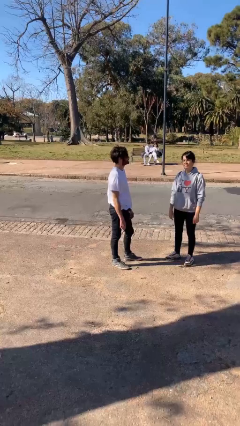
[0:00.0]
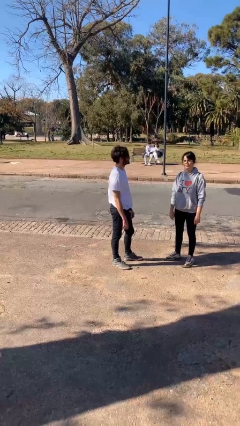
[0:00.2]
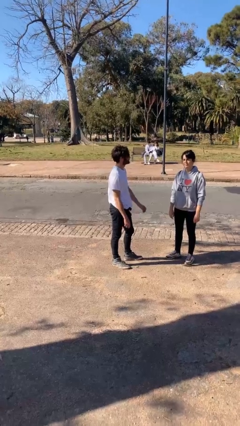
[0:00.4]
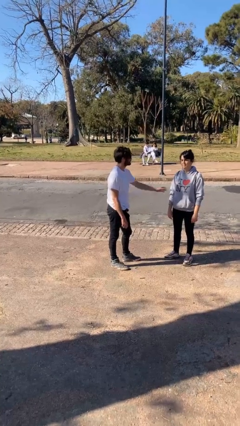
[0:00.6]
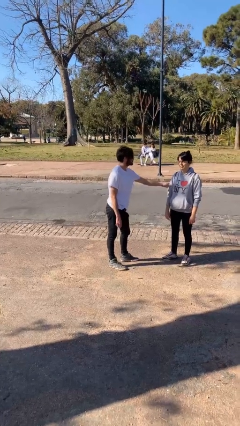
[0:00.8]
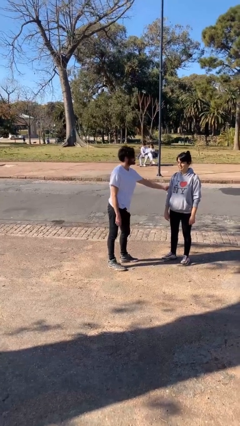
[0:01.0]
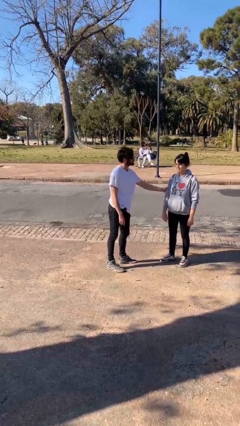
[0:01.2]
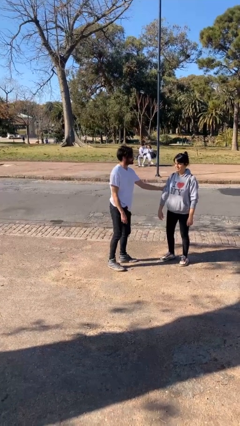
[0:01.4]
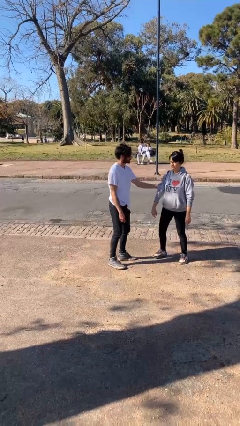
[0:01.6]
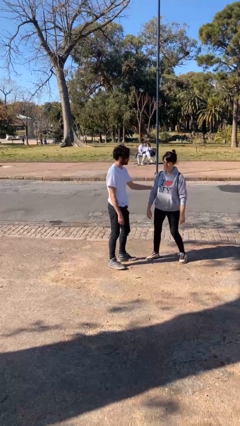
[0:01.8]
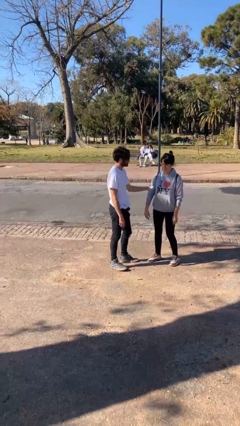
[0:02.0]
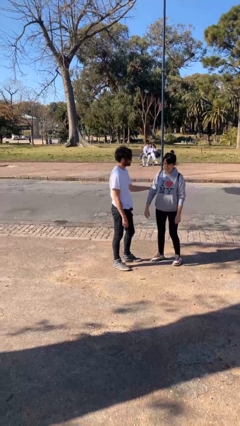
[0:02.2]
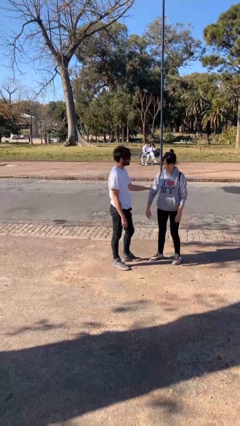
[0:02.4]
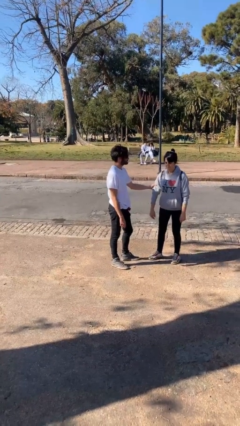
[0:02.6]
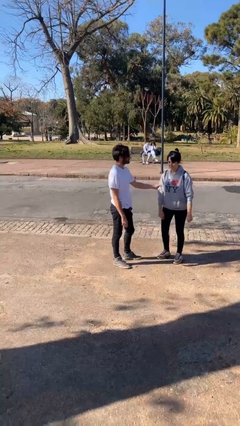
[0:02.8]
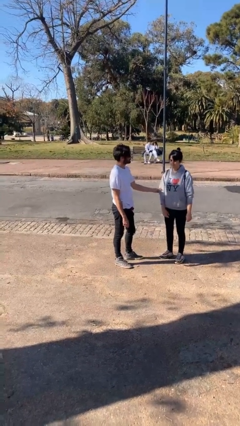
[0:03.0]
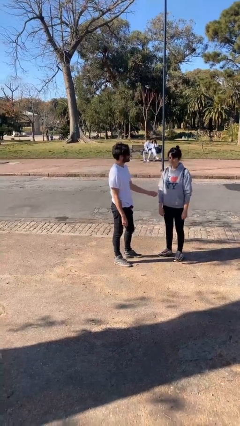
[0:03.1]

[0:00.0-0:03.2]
person grabs person by bicep

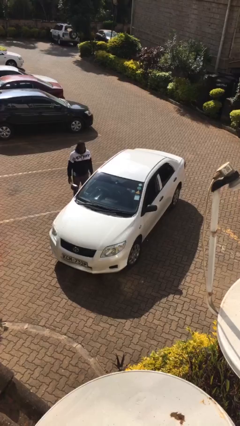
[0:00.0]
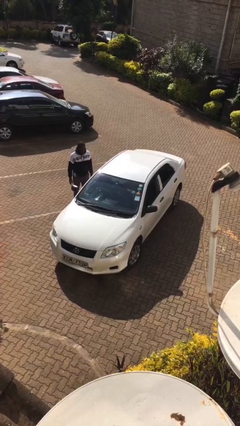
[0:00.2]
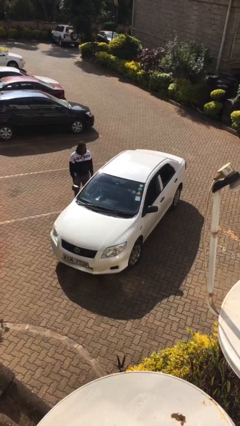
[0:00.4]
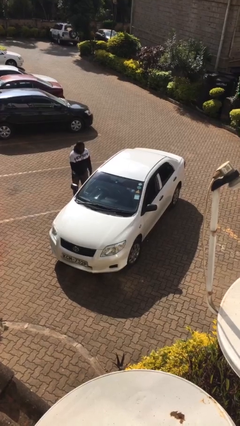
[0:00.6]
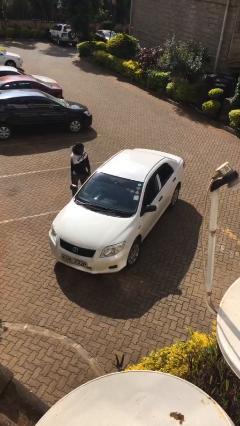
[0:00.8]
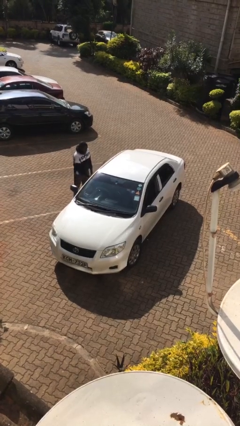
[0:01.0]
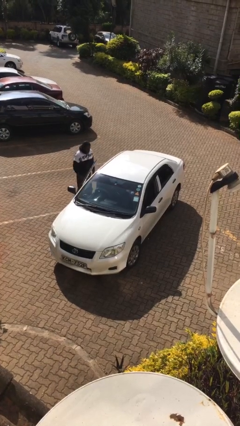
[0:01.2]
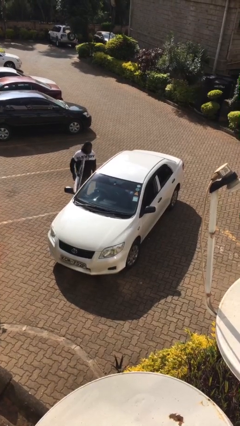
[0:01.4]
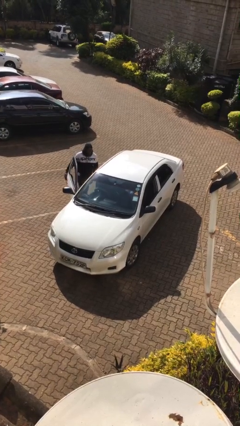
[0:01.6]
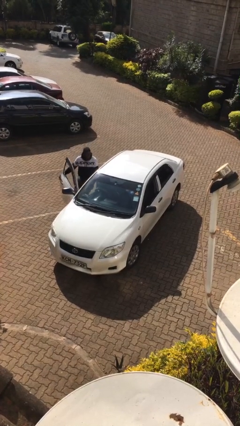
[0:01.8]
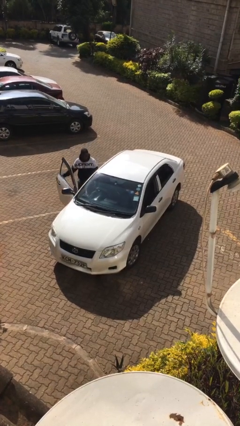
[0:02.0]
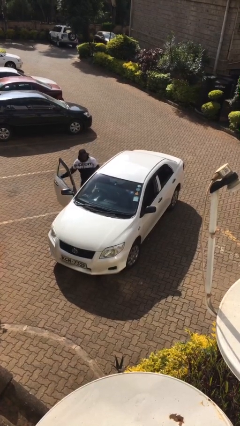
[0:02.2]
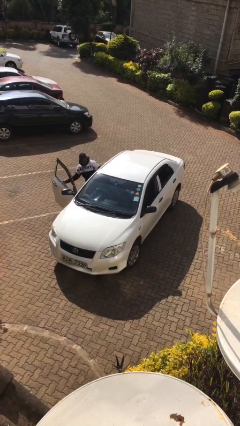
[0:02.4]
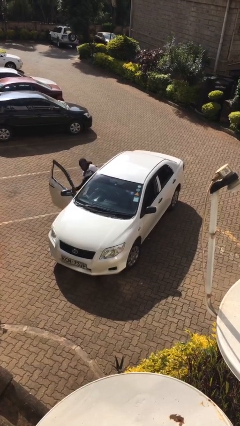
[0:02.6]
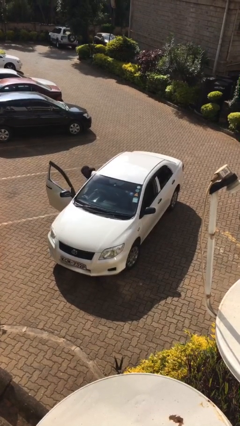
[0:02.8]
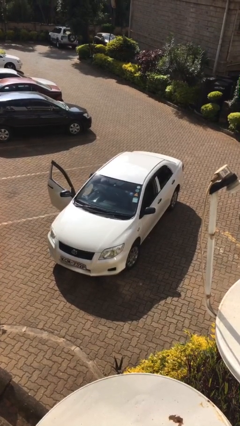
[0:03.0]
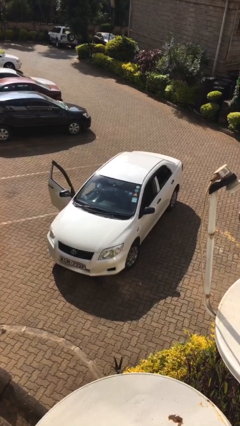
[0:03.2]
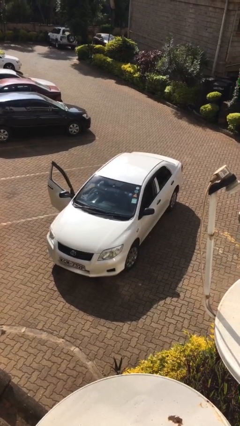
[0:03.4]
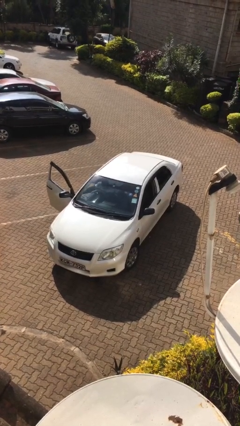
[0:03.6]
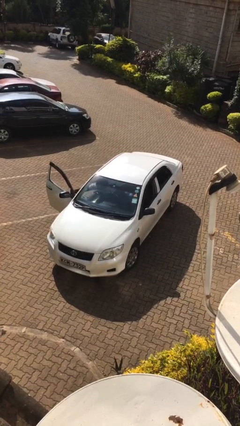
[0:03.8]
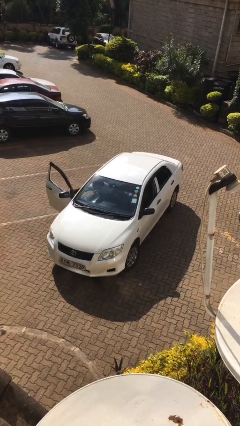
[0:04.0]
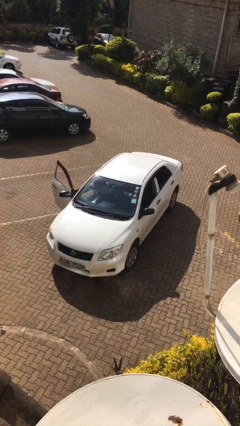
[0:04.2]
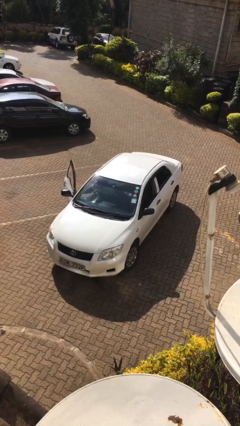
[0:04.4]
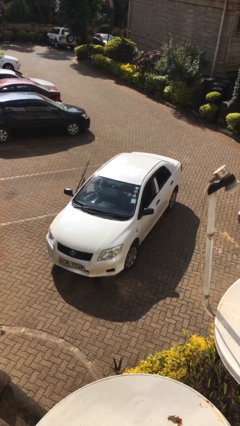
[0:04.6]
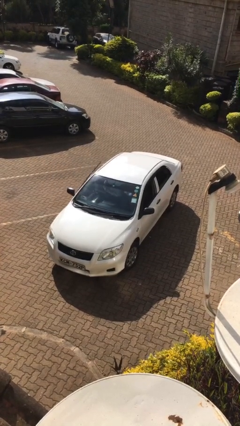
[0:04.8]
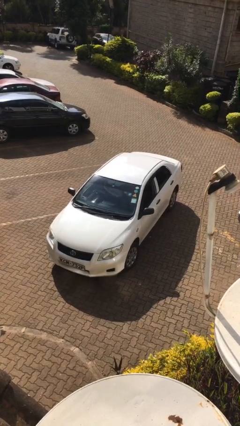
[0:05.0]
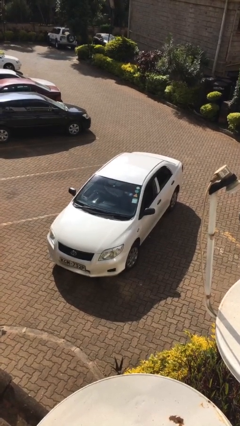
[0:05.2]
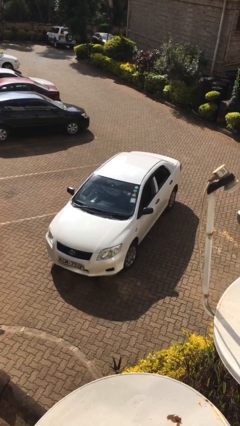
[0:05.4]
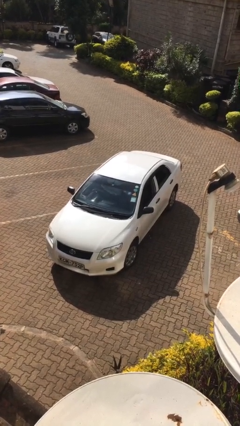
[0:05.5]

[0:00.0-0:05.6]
car picks up person

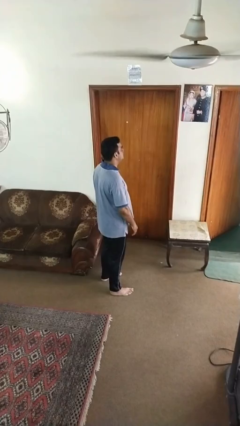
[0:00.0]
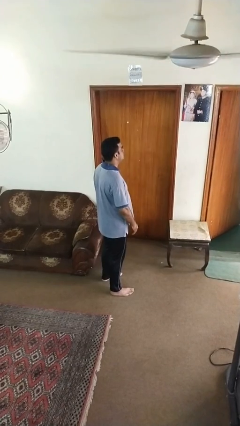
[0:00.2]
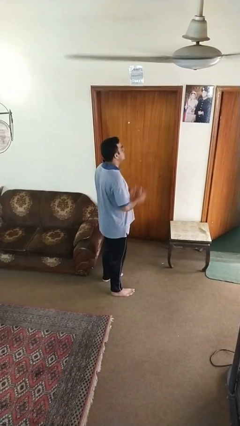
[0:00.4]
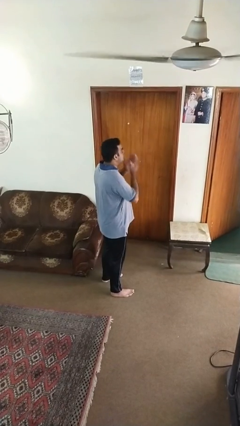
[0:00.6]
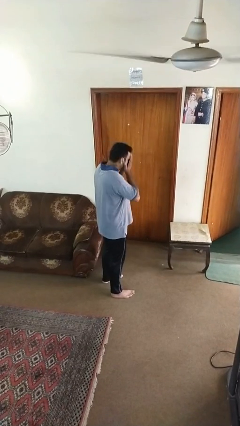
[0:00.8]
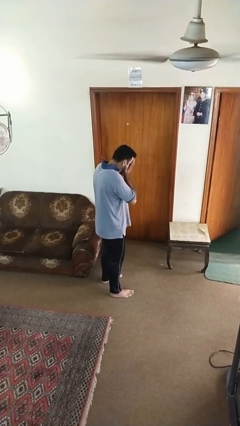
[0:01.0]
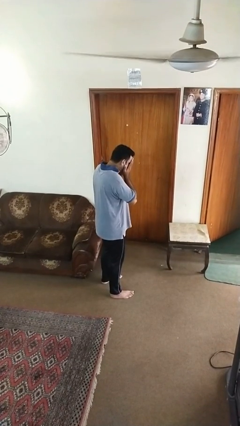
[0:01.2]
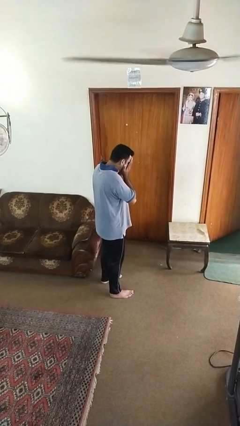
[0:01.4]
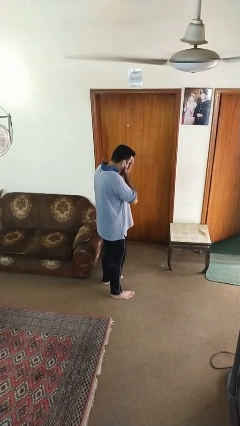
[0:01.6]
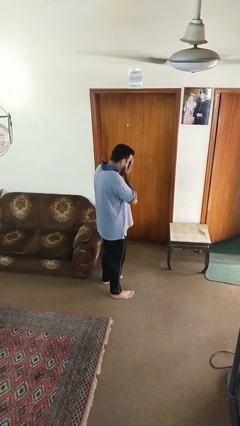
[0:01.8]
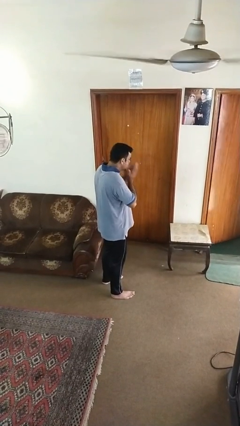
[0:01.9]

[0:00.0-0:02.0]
person sneezes into hand

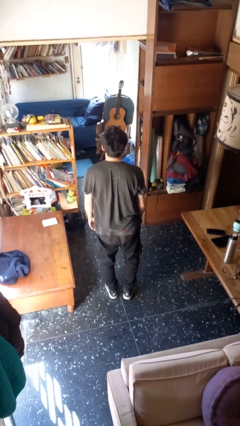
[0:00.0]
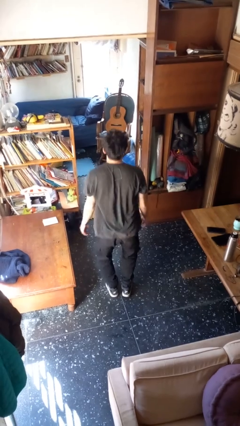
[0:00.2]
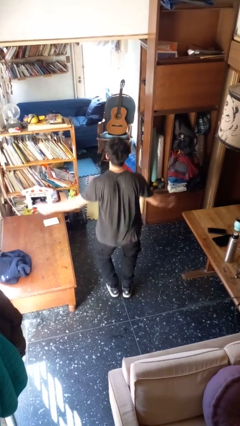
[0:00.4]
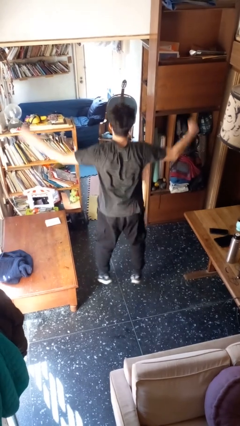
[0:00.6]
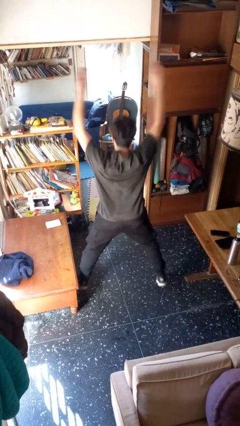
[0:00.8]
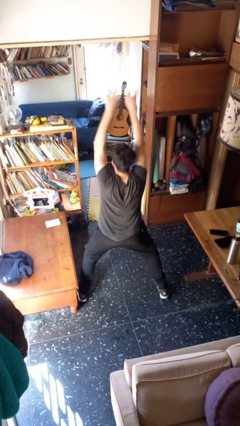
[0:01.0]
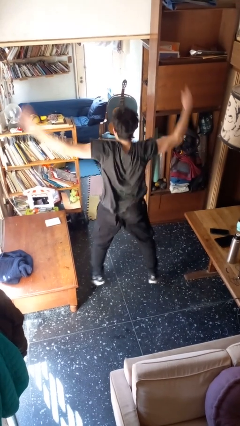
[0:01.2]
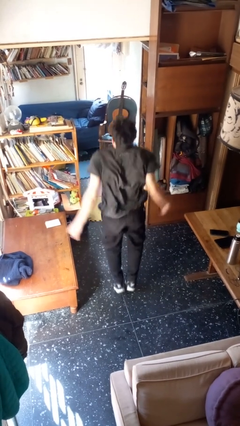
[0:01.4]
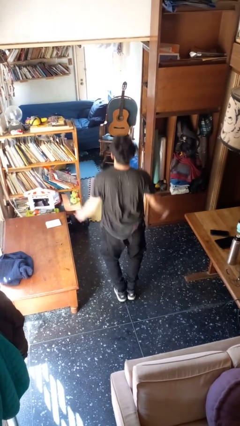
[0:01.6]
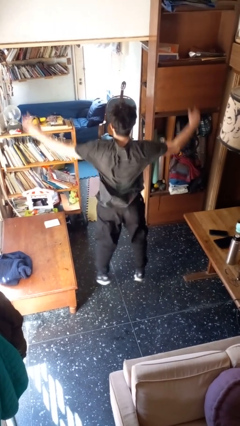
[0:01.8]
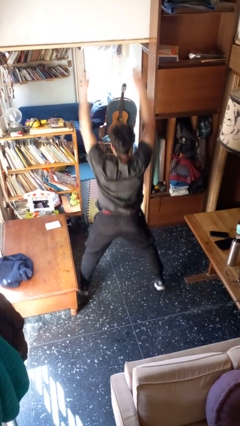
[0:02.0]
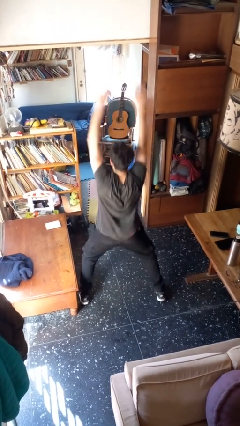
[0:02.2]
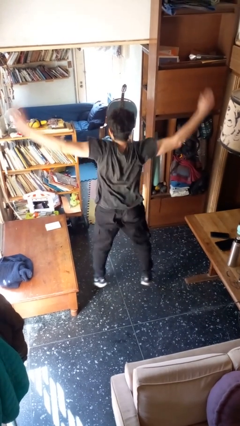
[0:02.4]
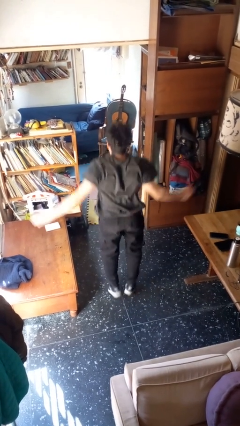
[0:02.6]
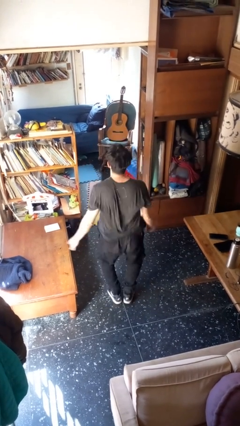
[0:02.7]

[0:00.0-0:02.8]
person exercises with jumping jacks

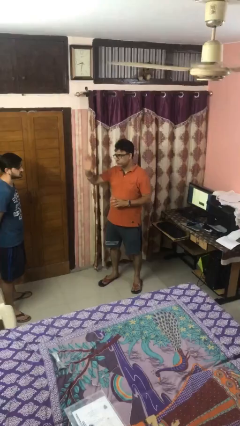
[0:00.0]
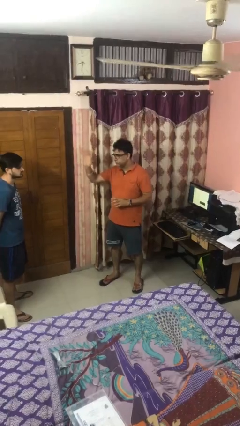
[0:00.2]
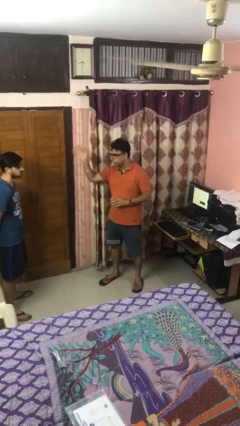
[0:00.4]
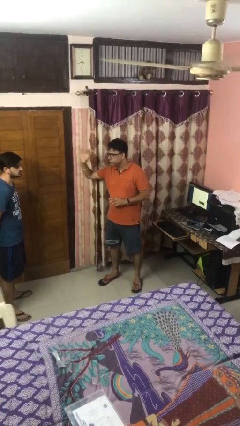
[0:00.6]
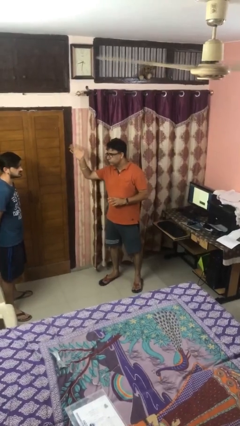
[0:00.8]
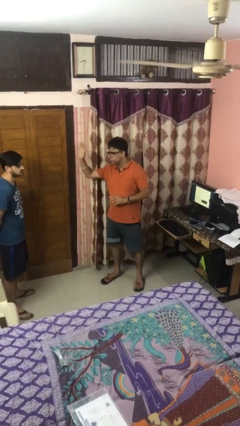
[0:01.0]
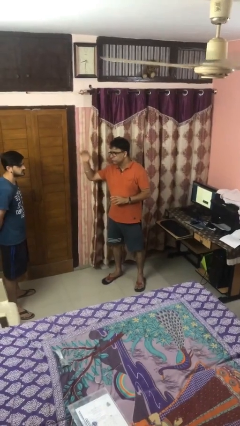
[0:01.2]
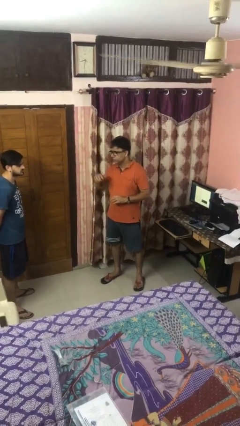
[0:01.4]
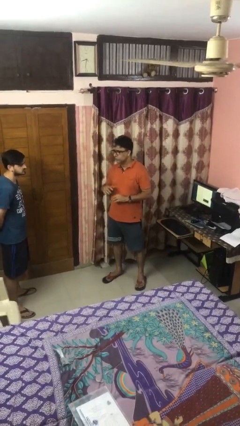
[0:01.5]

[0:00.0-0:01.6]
person waves at person

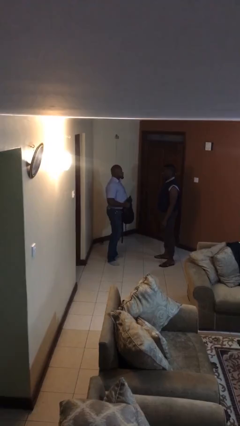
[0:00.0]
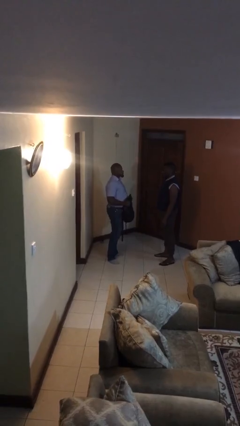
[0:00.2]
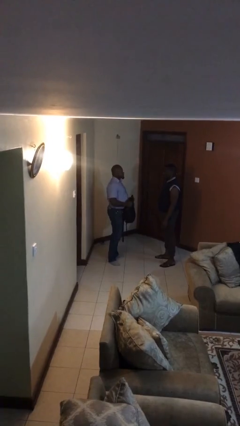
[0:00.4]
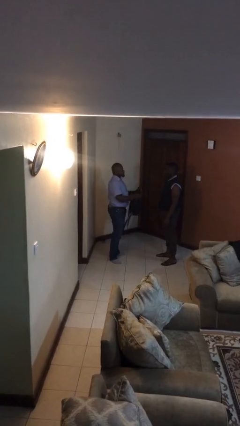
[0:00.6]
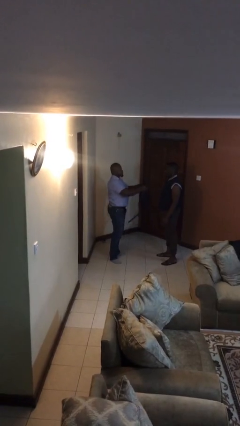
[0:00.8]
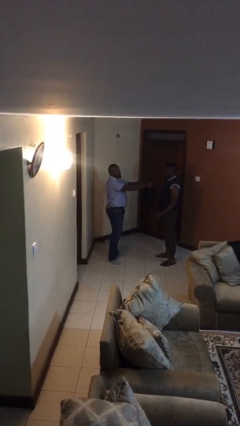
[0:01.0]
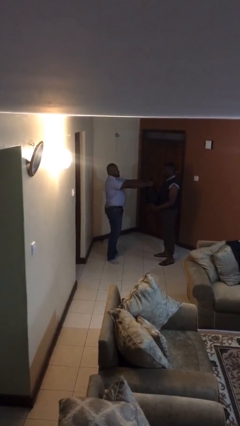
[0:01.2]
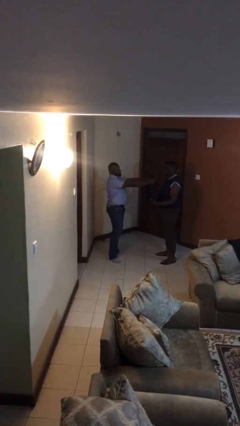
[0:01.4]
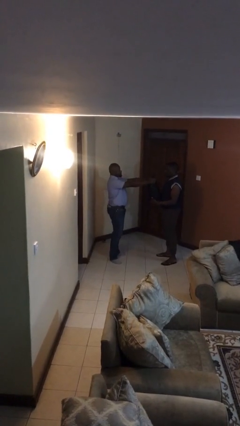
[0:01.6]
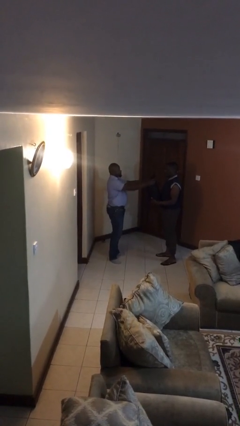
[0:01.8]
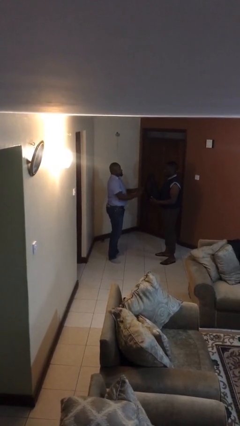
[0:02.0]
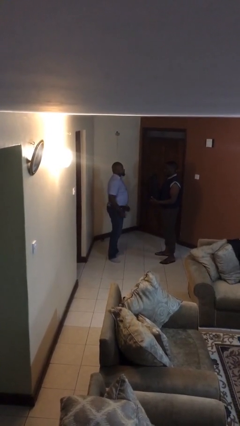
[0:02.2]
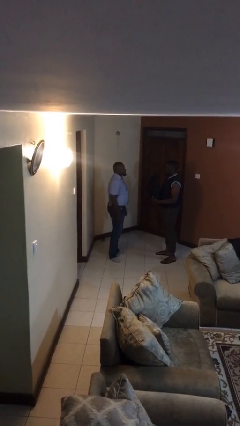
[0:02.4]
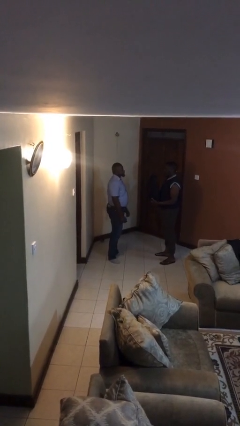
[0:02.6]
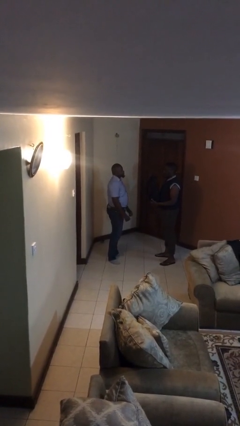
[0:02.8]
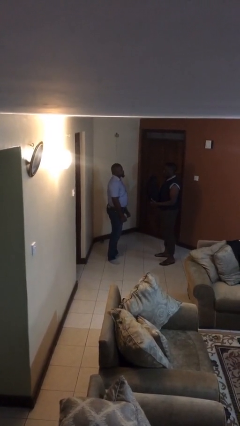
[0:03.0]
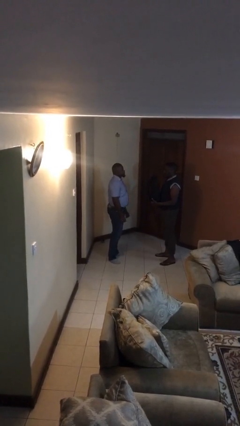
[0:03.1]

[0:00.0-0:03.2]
person transfers object to person
